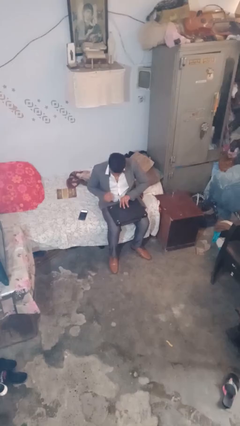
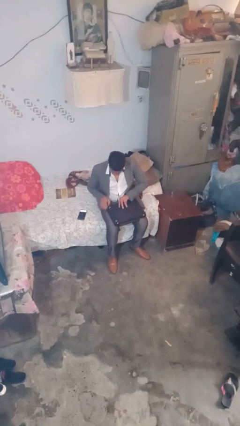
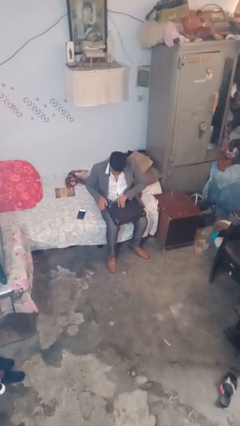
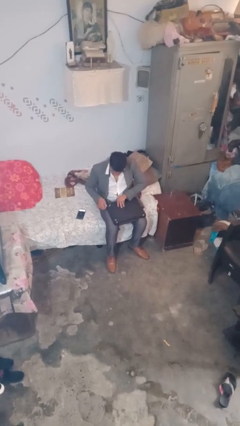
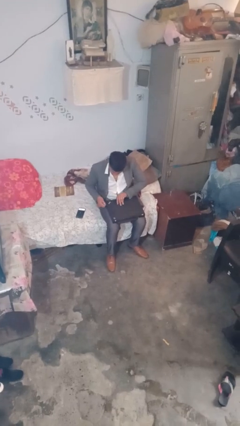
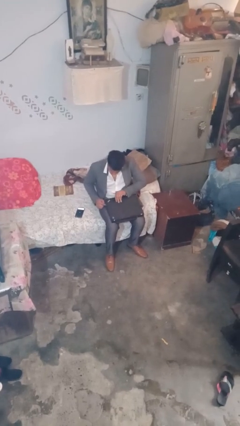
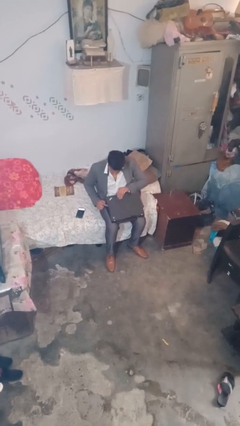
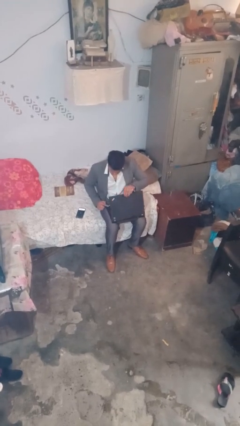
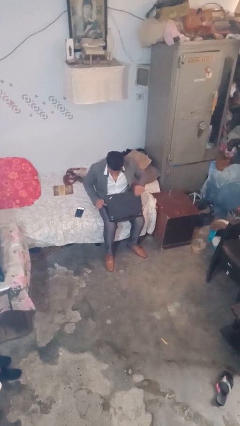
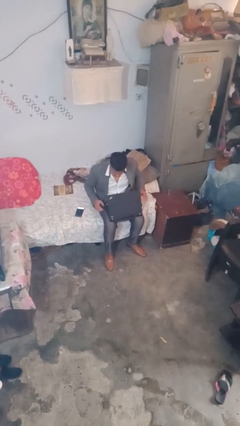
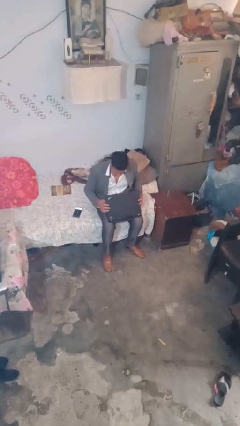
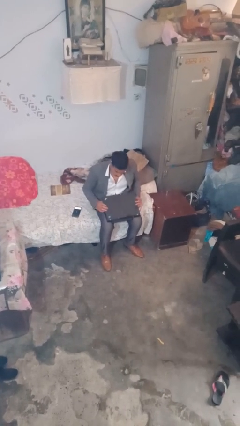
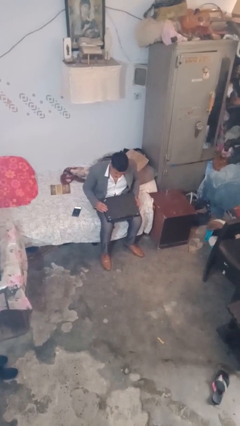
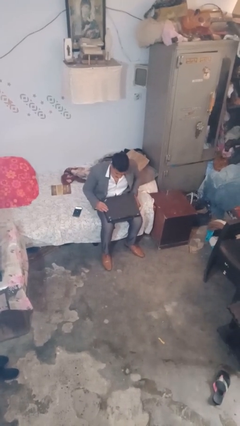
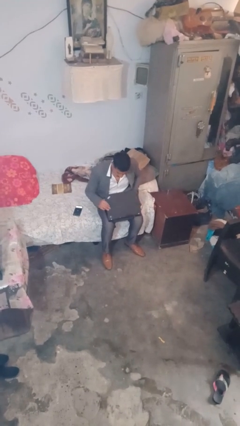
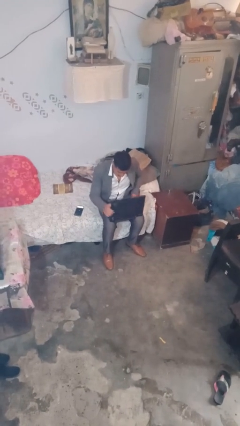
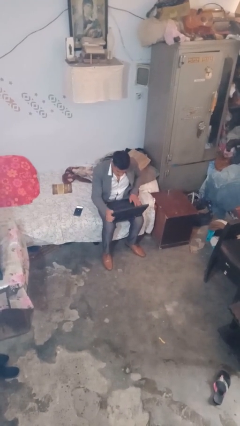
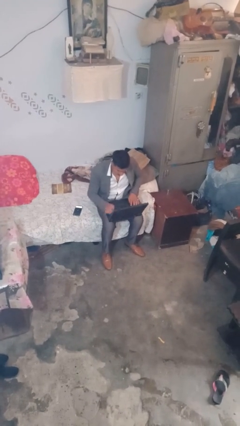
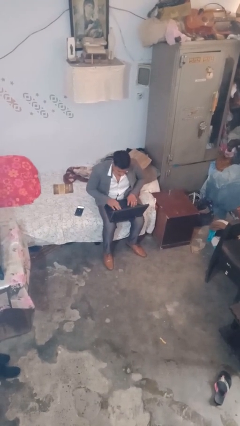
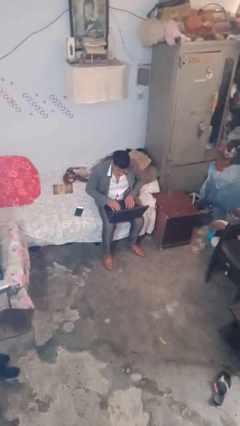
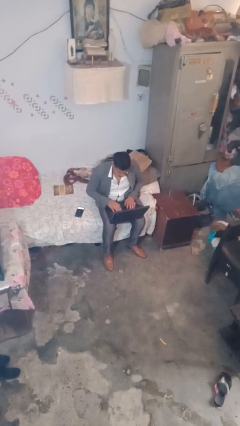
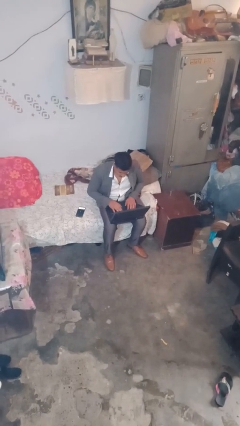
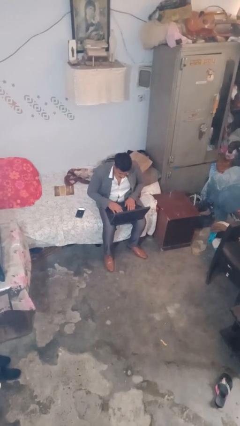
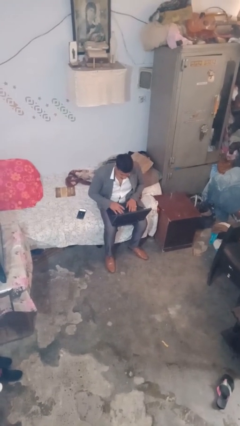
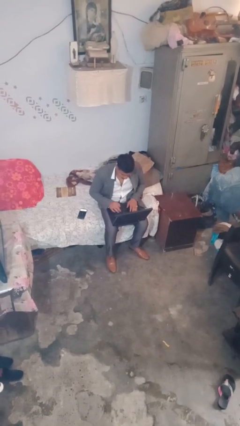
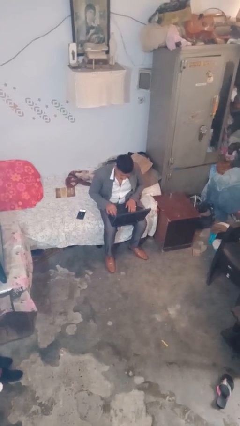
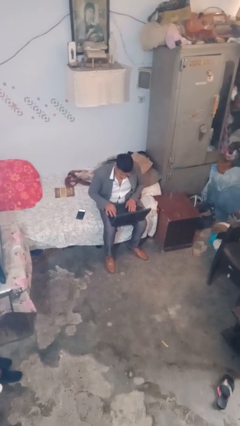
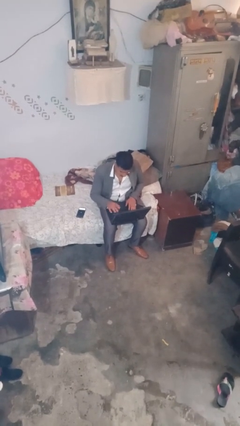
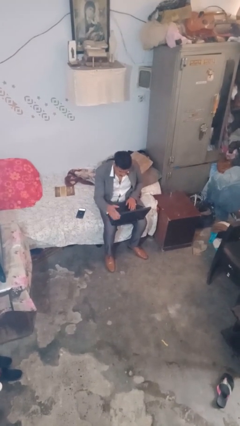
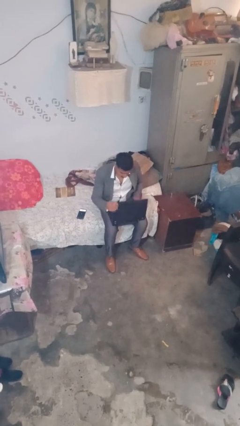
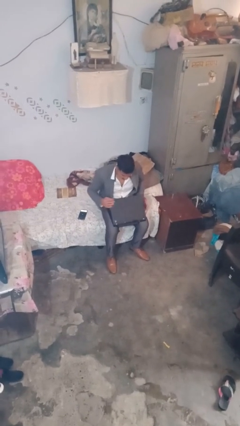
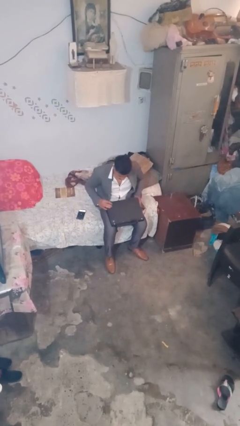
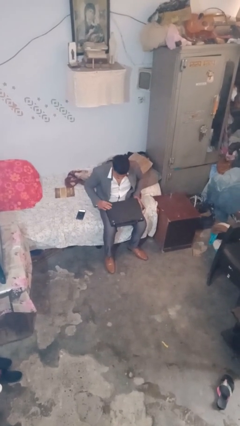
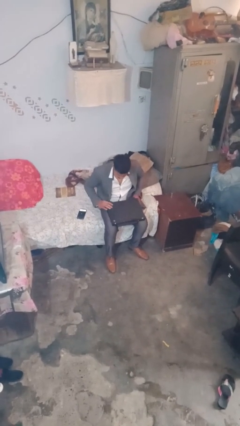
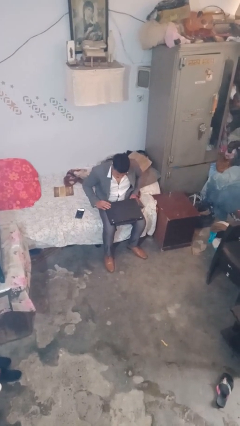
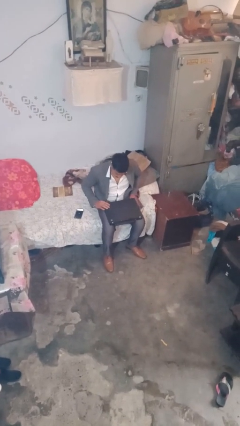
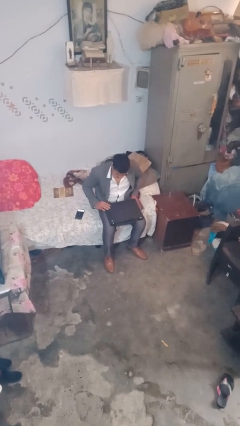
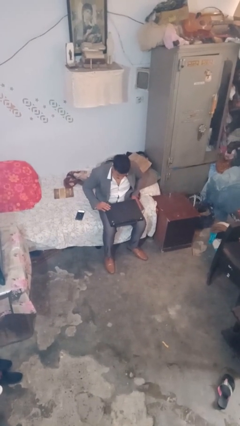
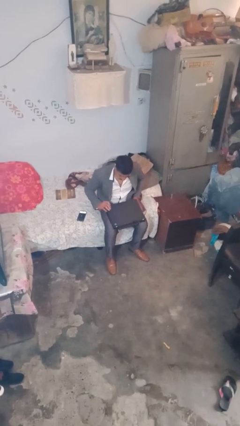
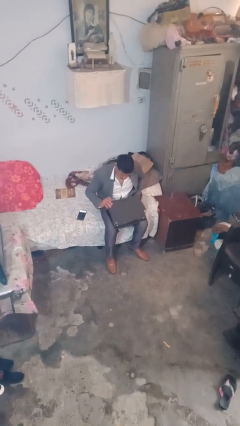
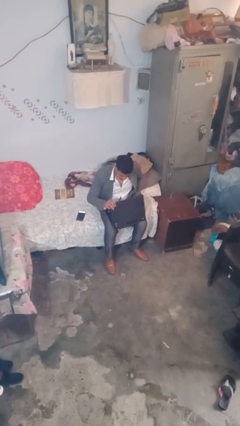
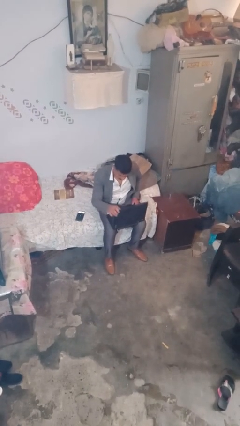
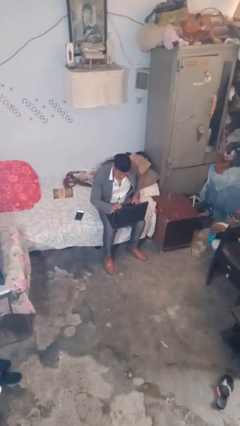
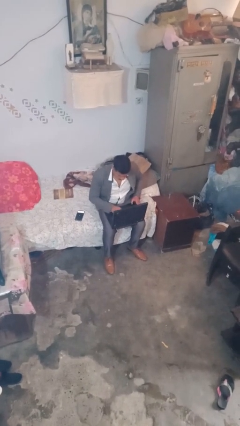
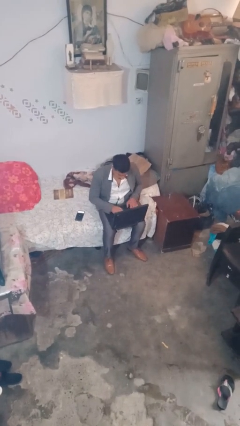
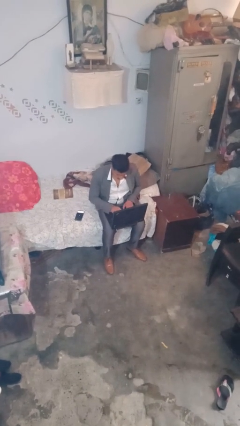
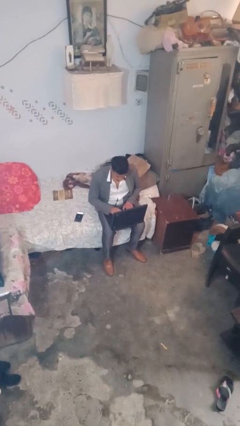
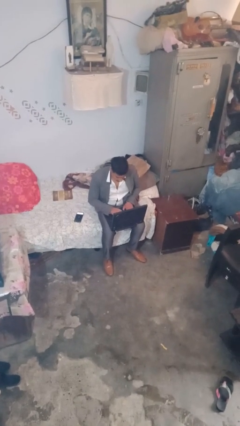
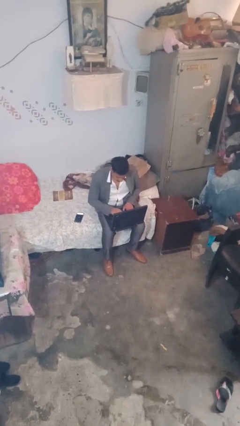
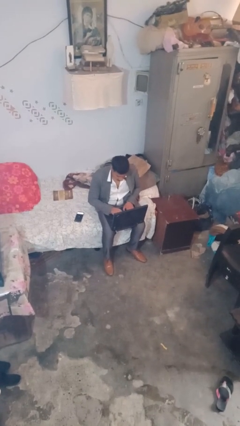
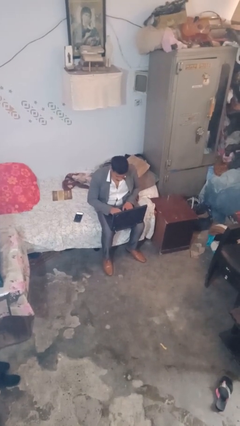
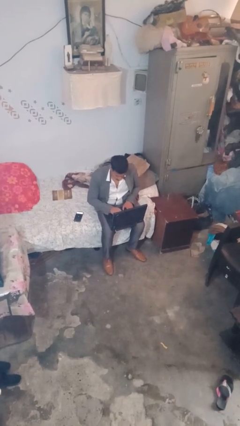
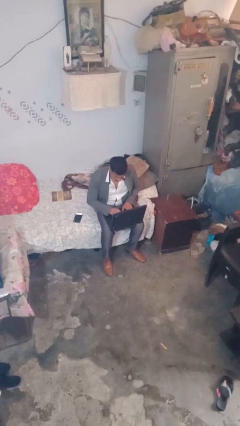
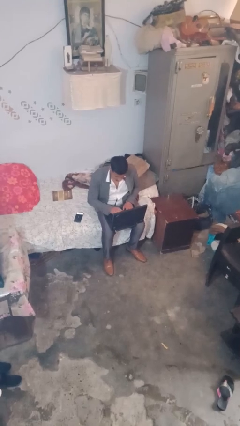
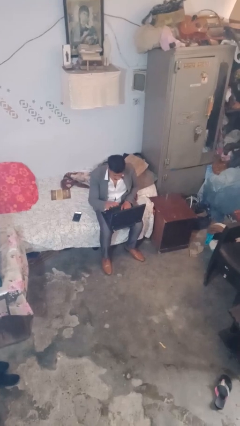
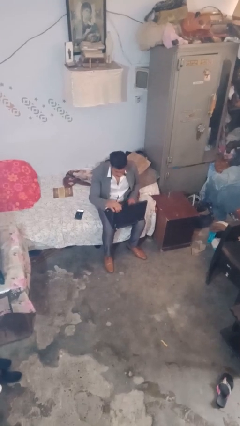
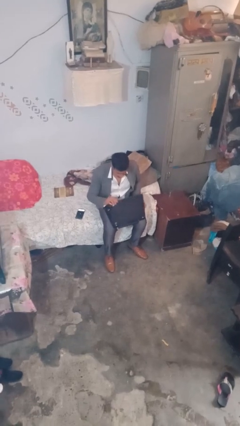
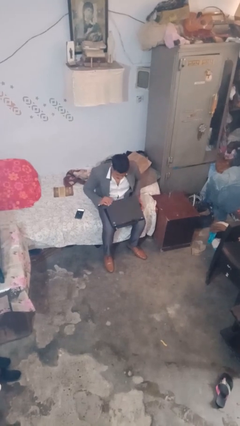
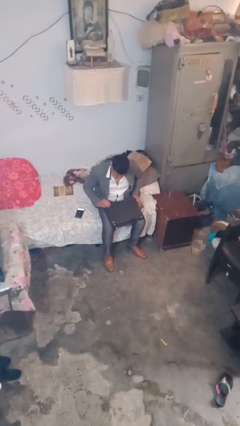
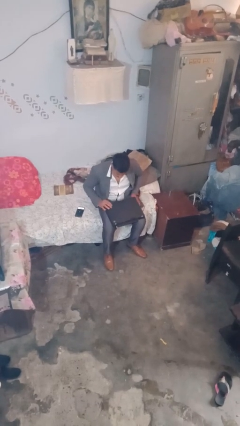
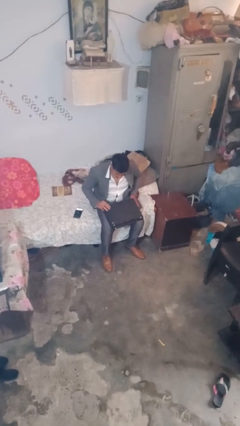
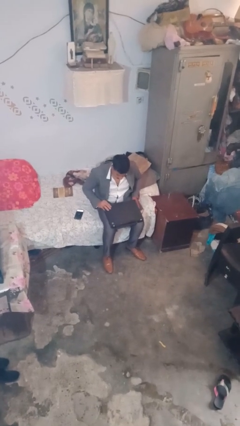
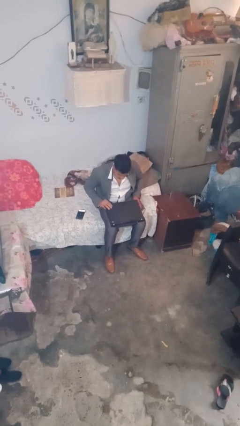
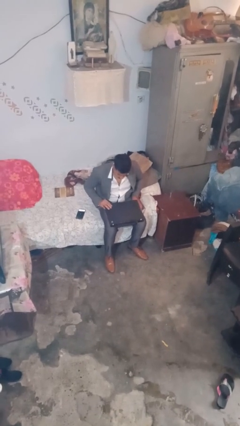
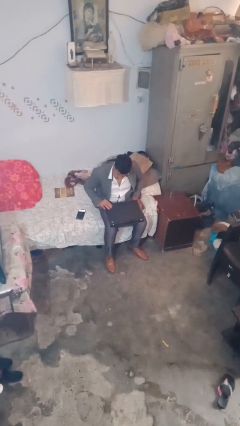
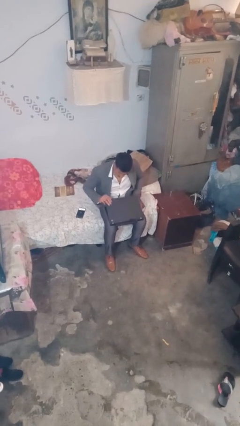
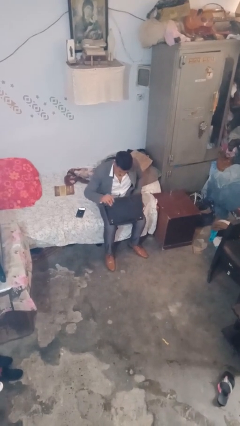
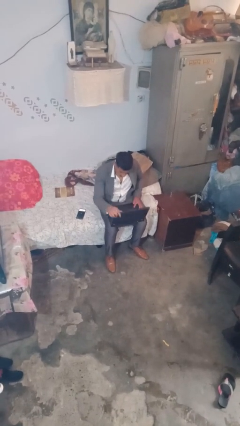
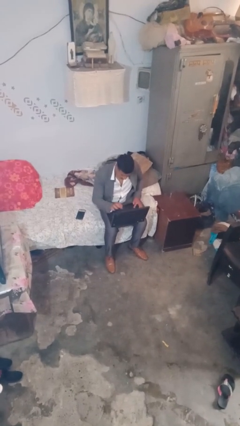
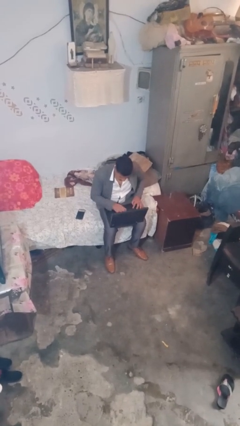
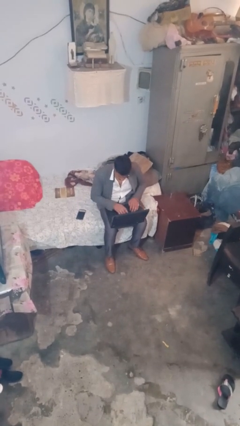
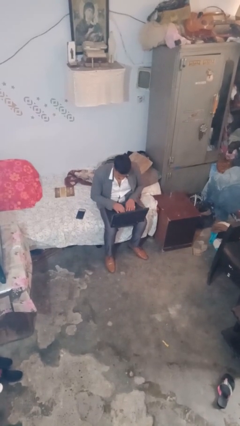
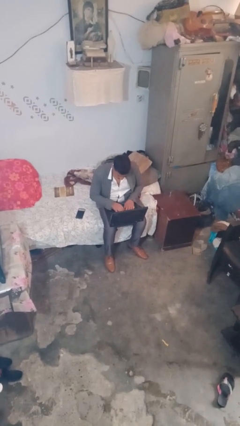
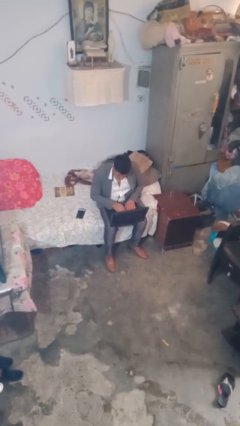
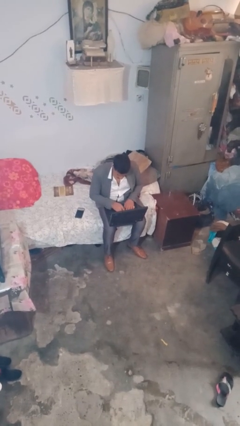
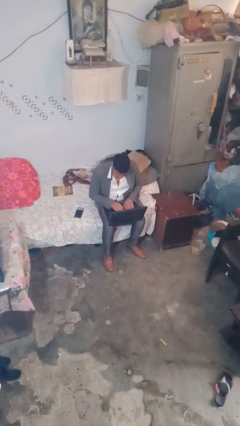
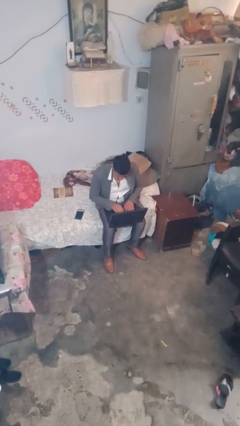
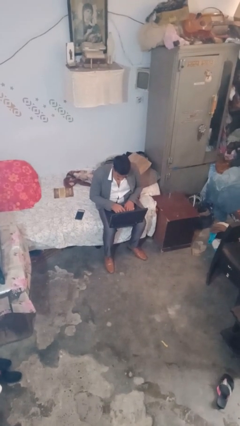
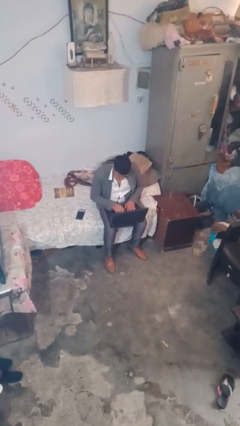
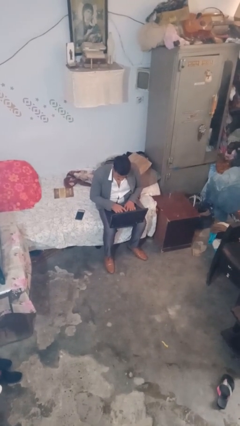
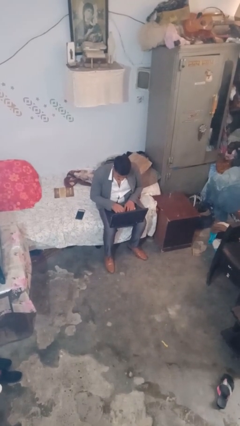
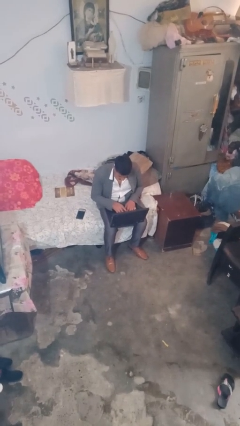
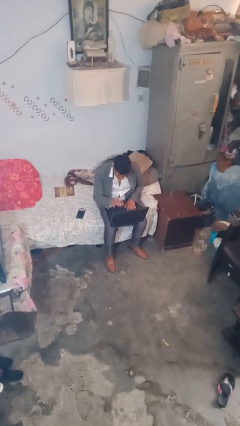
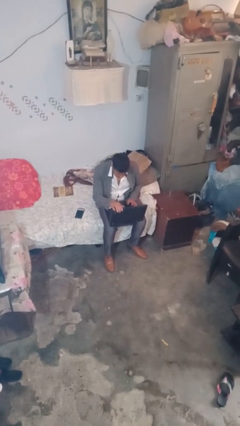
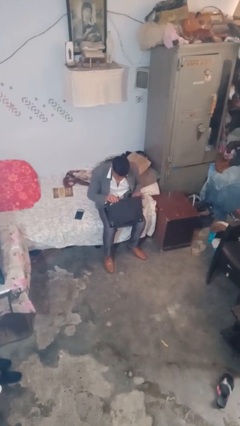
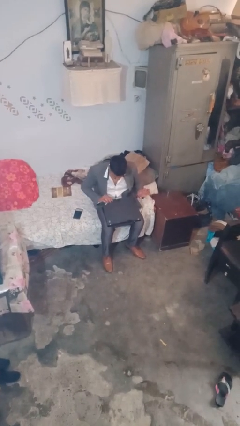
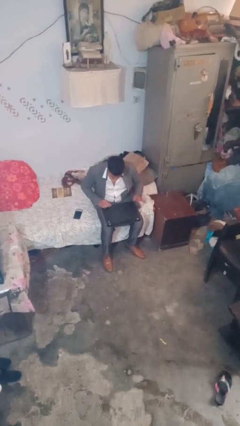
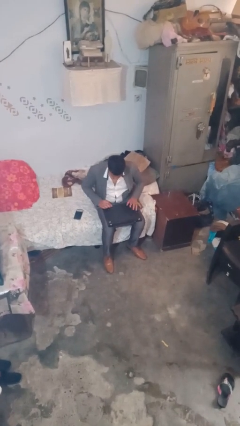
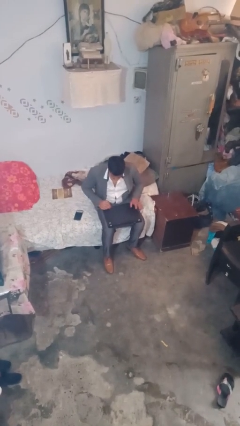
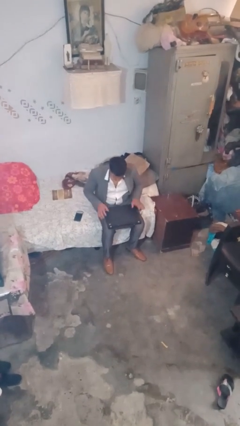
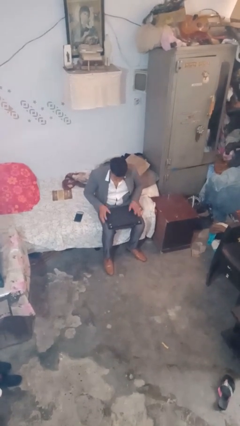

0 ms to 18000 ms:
person interacts with laptop

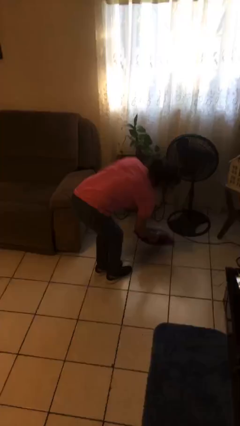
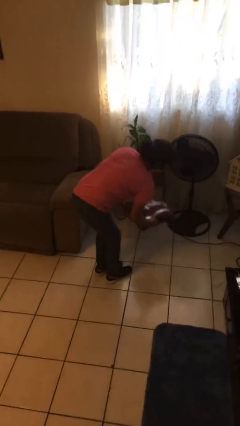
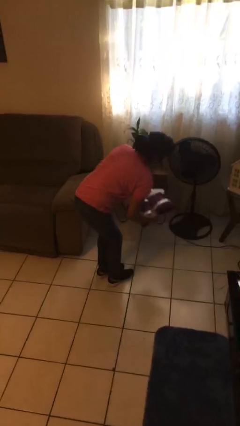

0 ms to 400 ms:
person picks up object from floor
